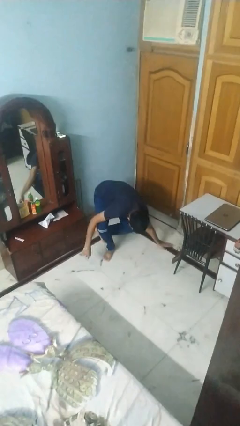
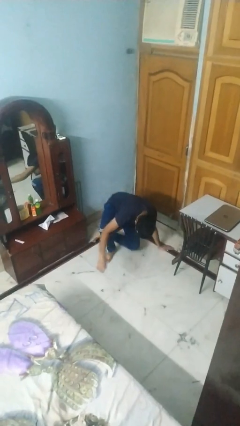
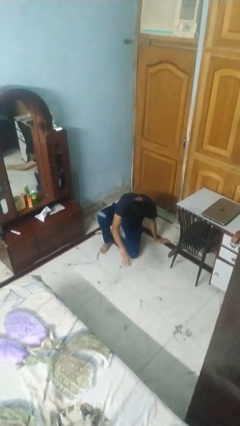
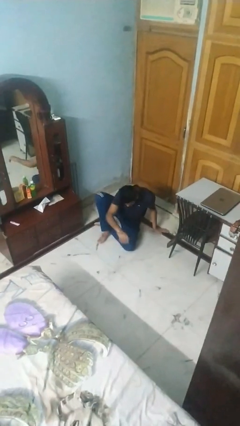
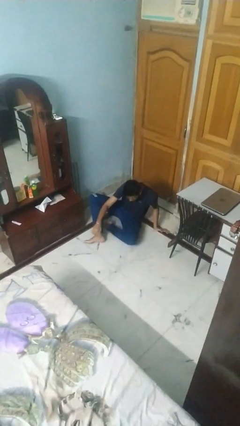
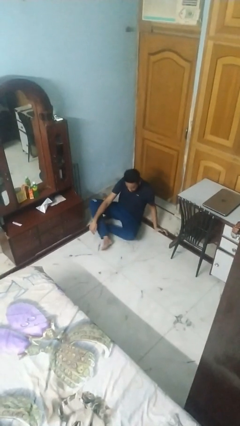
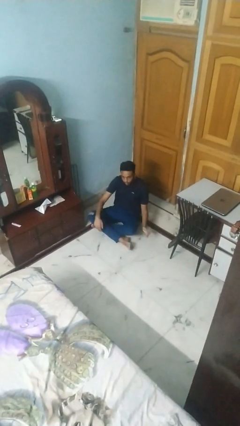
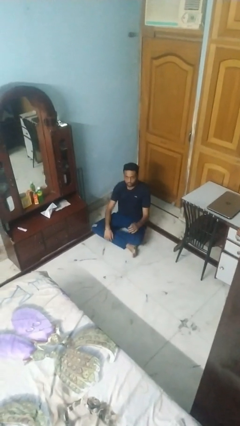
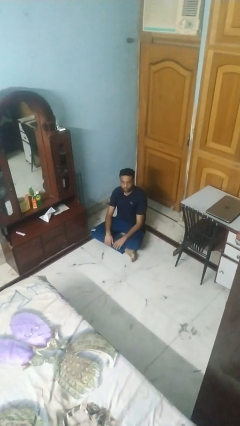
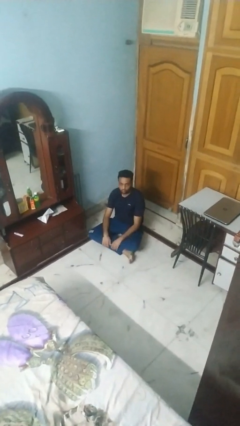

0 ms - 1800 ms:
person sits crisscross

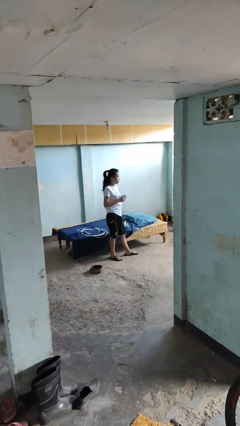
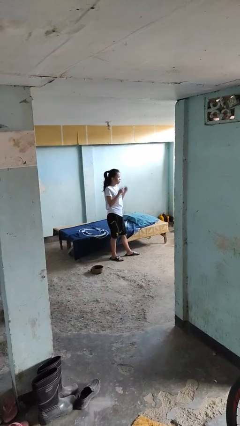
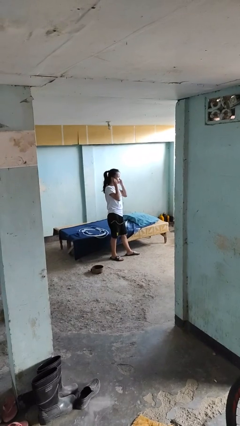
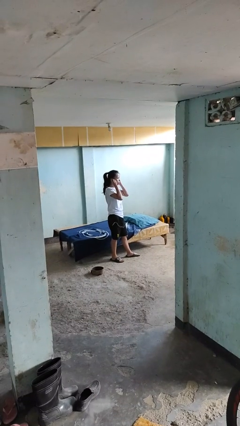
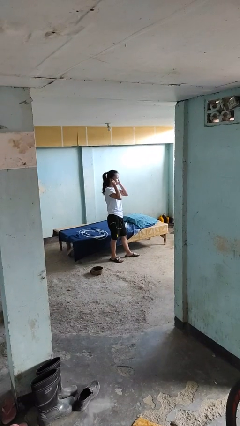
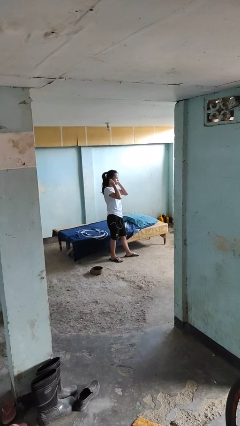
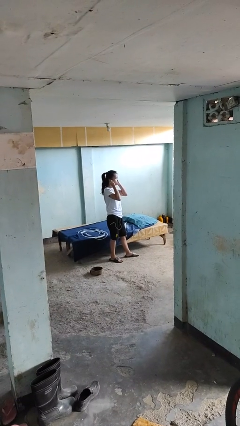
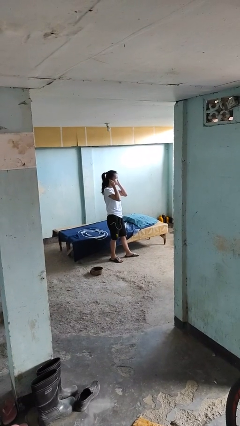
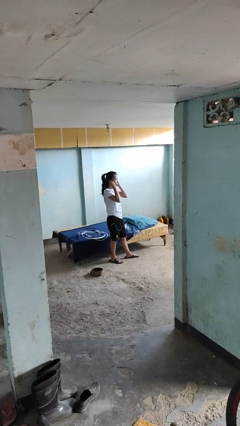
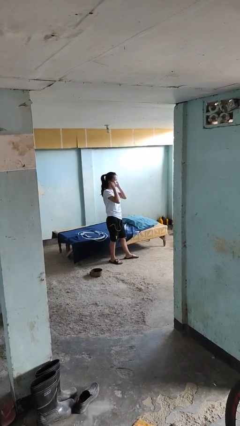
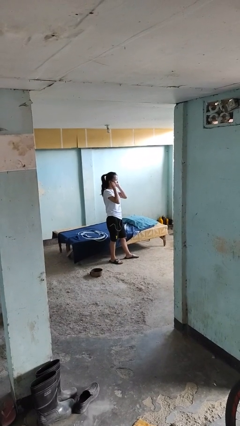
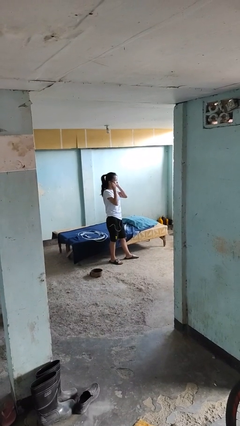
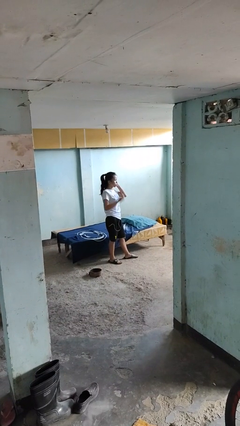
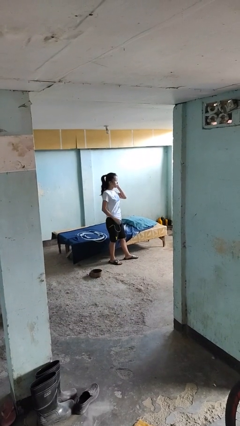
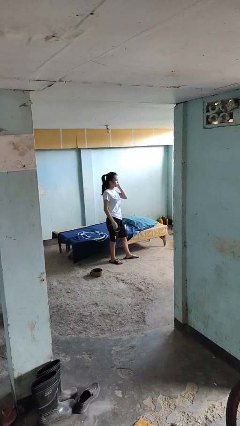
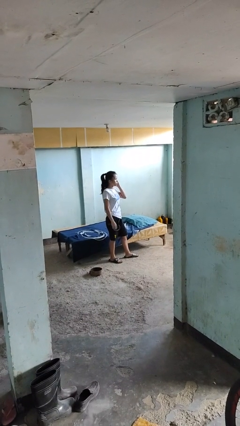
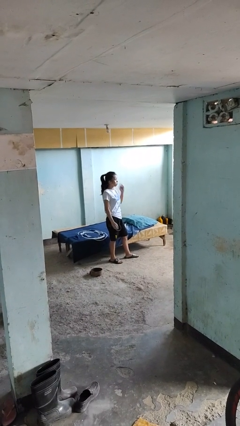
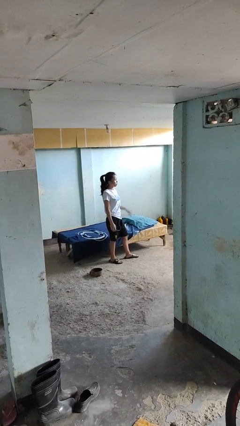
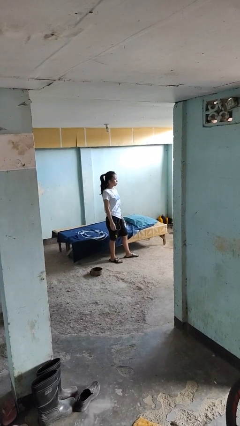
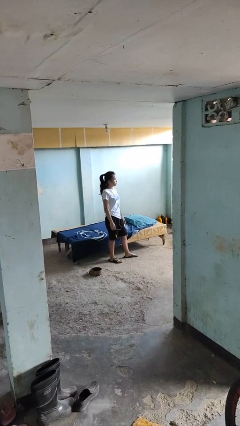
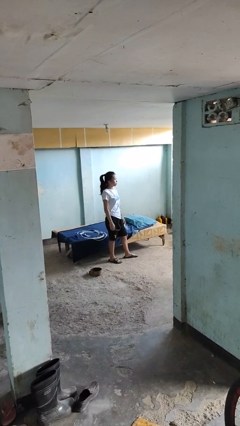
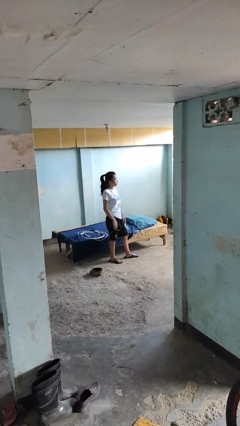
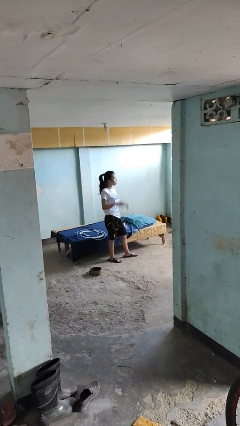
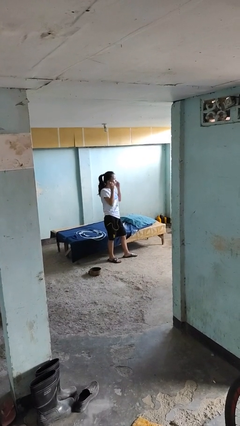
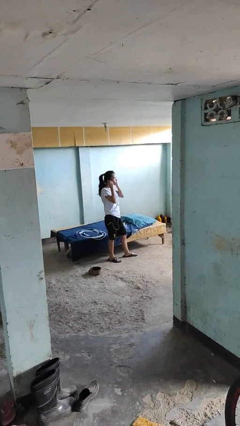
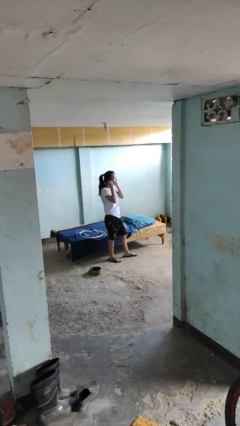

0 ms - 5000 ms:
person puts on headphones

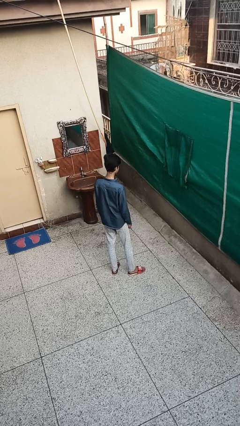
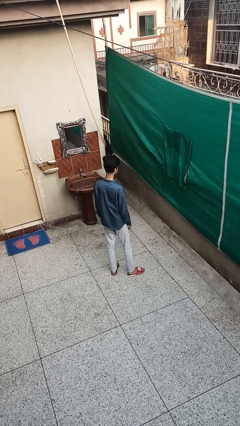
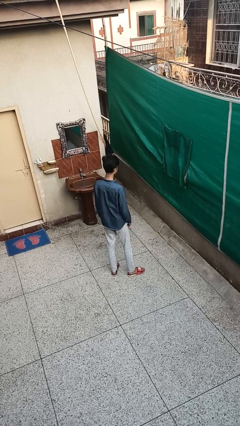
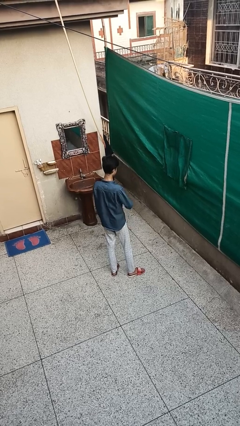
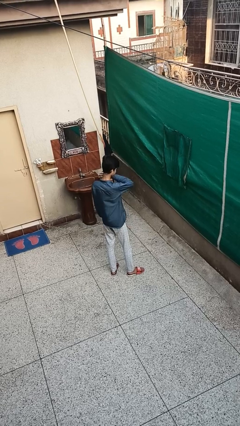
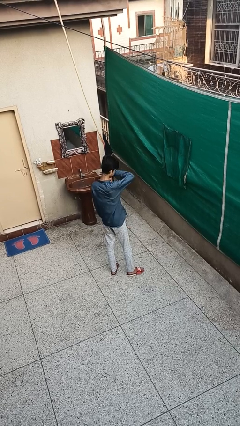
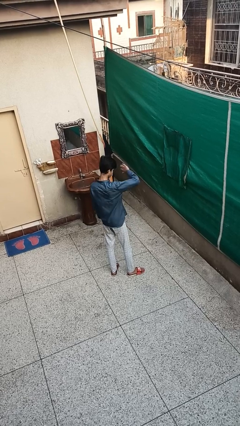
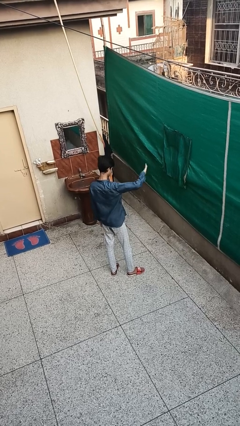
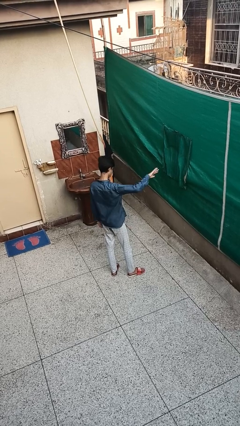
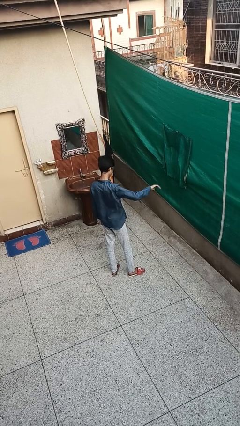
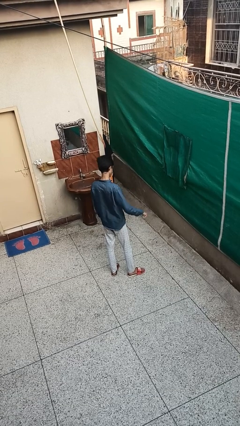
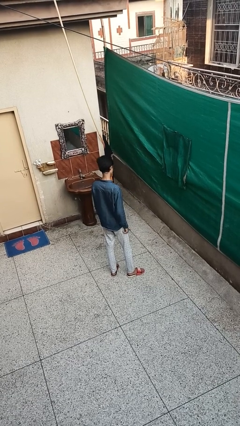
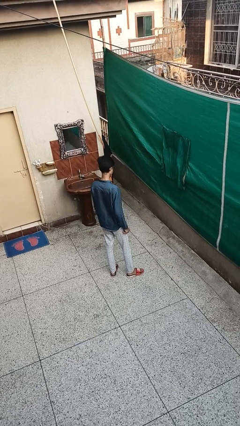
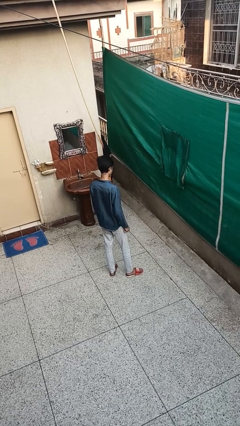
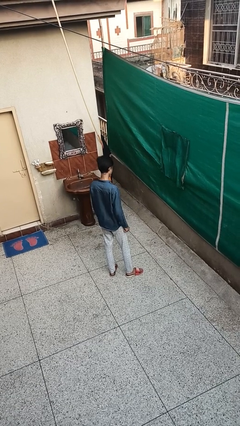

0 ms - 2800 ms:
person gestures swipe right

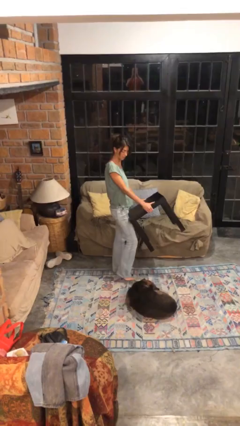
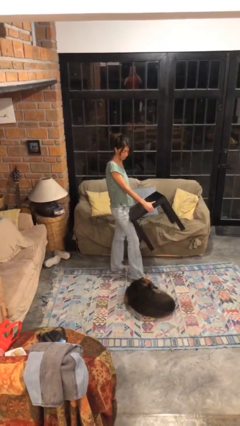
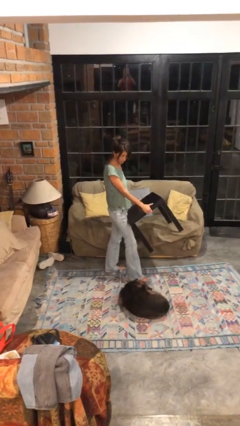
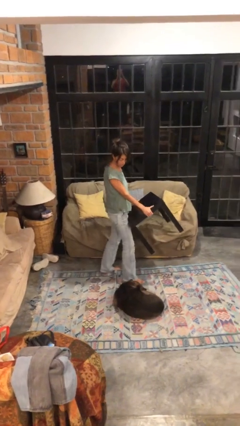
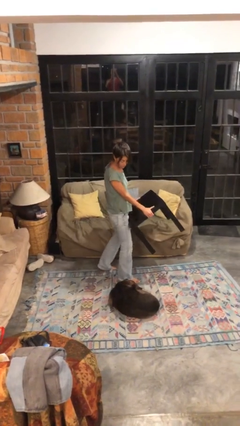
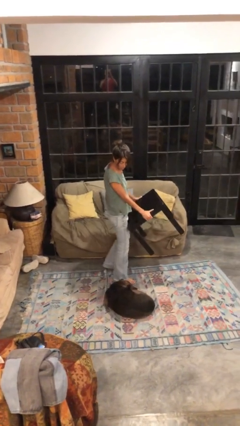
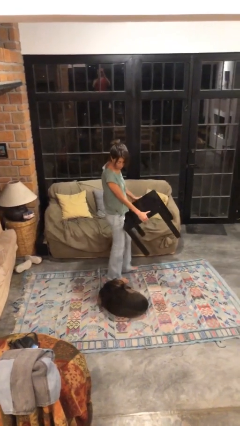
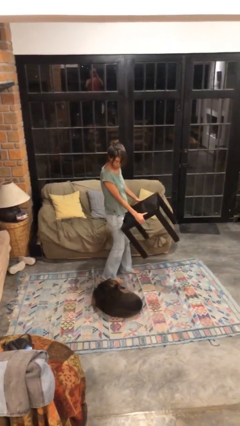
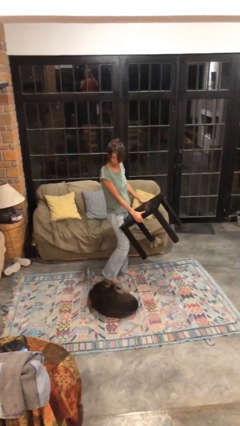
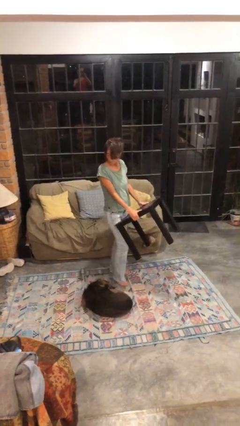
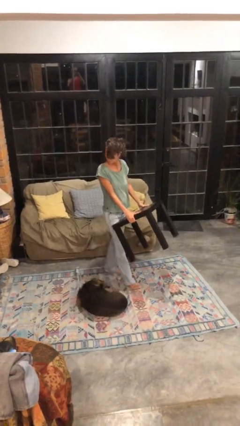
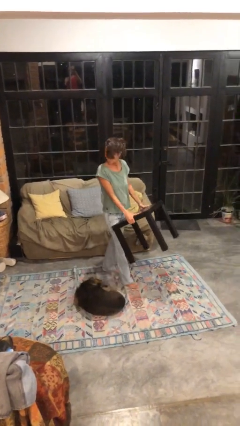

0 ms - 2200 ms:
person carries furniture

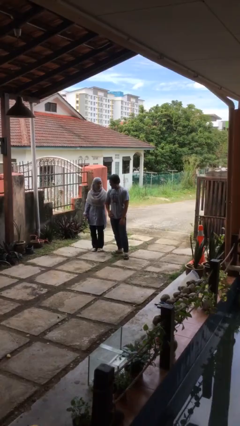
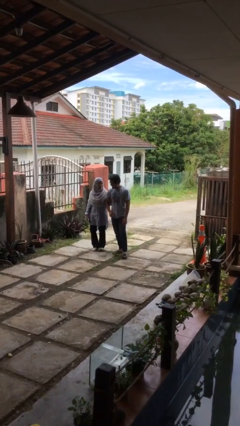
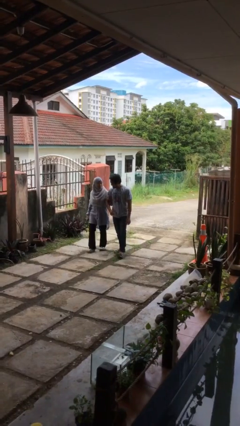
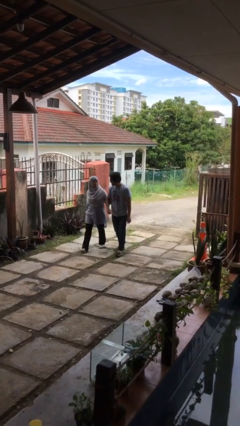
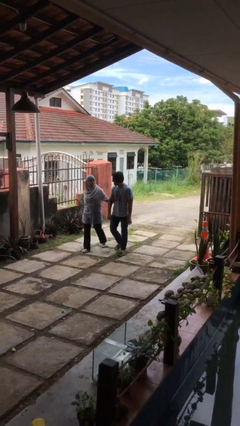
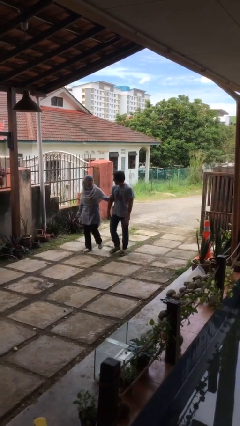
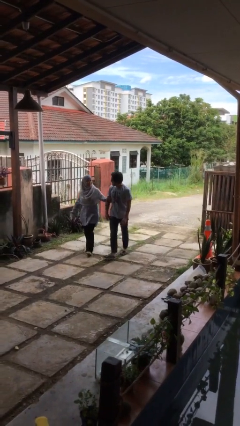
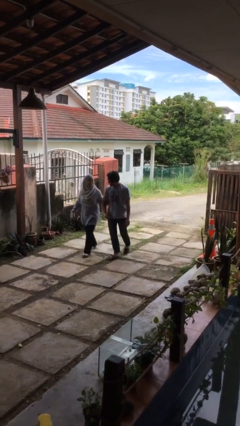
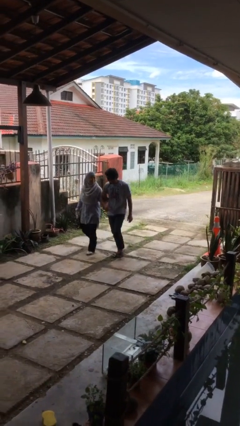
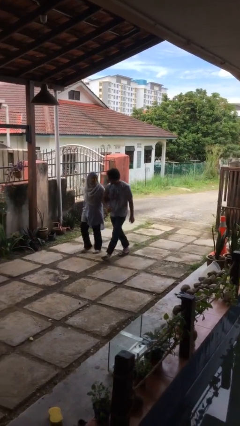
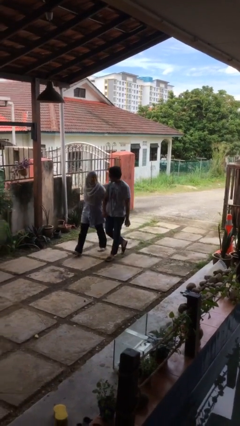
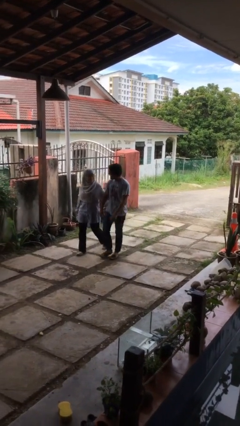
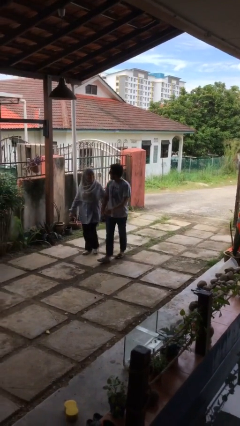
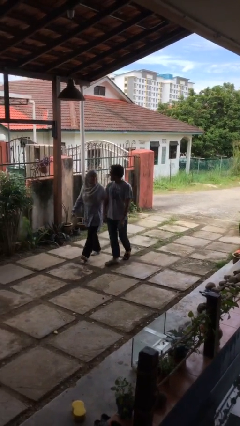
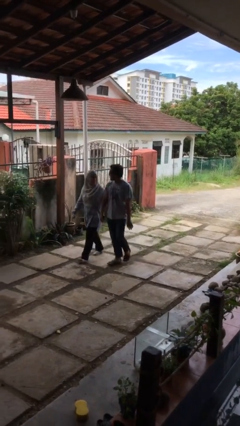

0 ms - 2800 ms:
person holds hand

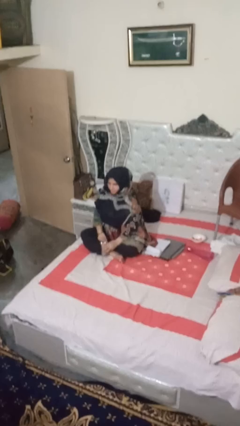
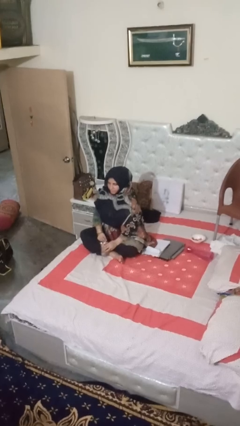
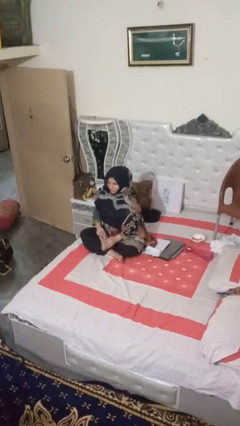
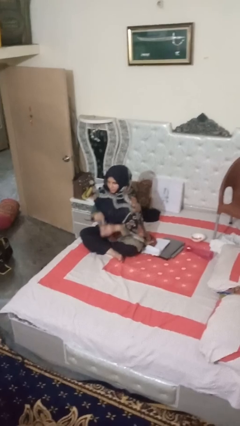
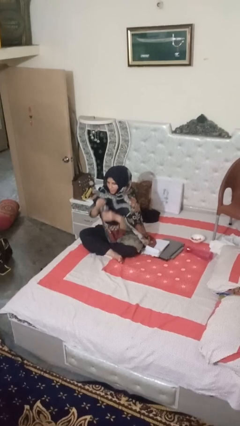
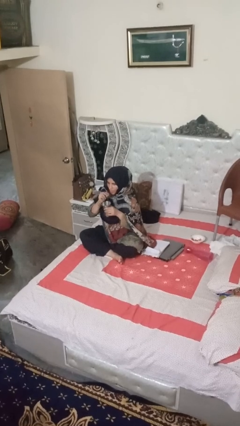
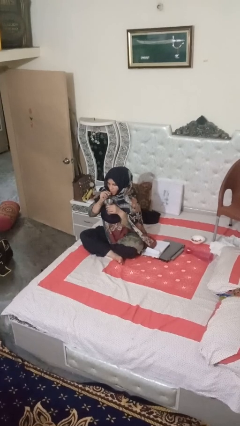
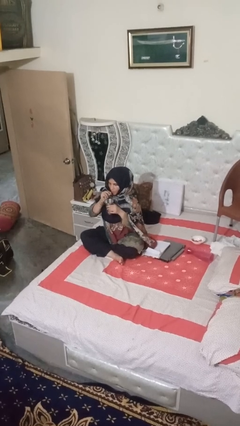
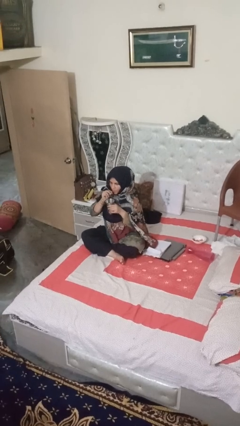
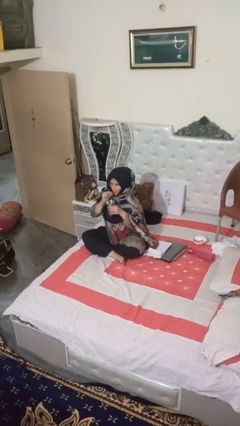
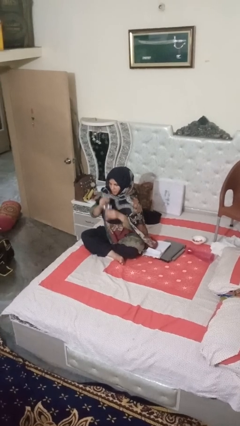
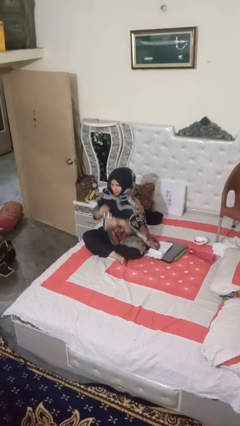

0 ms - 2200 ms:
person drinks from straw

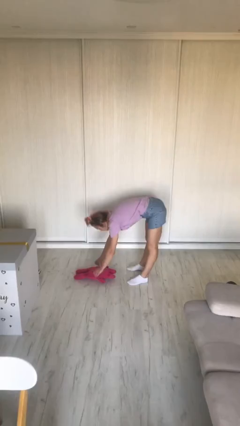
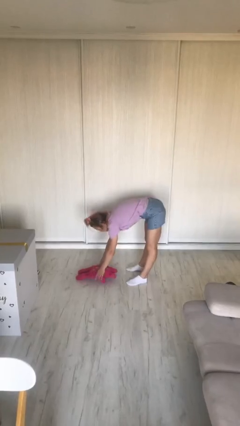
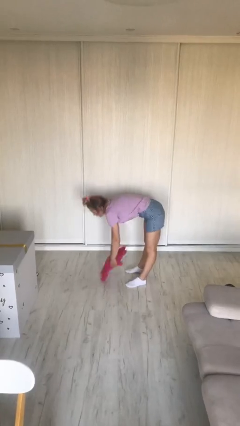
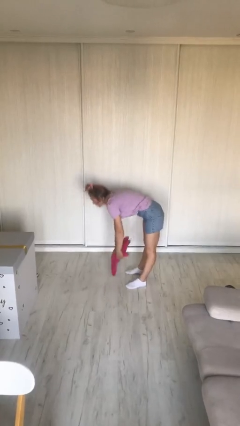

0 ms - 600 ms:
person picks up object from floor
